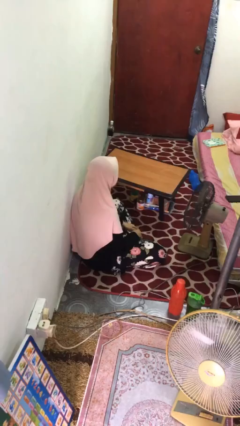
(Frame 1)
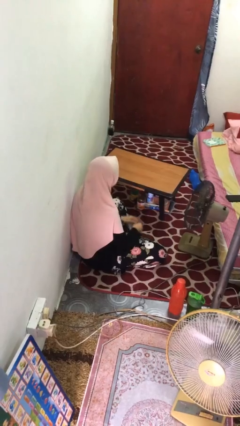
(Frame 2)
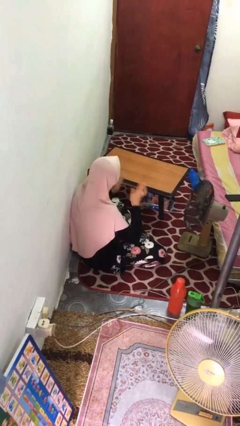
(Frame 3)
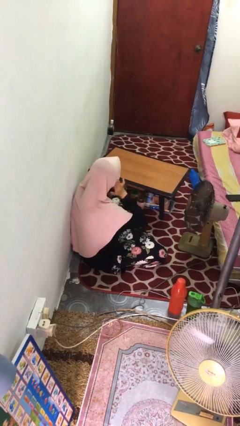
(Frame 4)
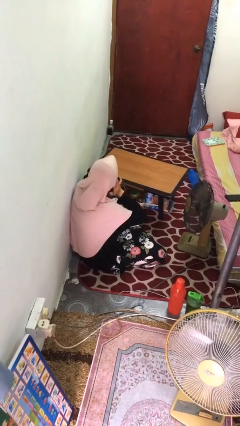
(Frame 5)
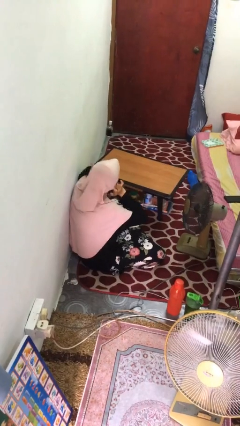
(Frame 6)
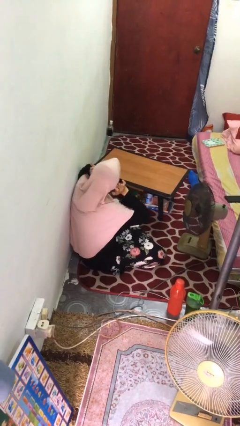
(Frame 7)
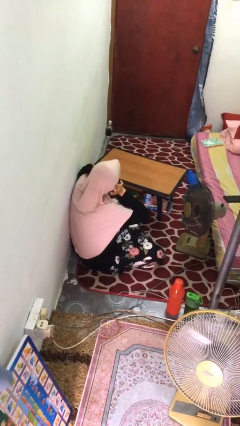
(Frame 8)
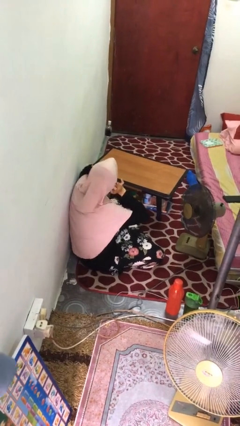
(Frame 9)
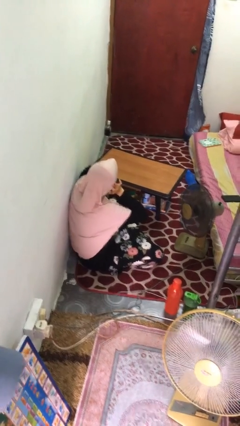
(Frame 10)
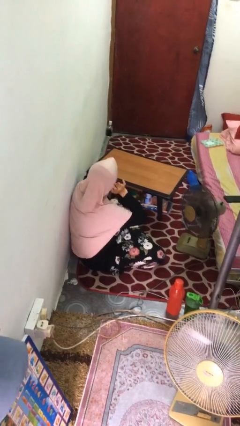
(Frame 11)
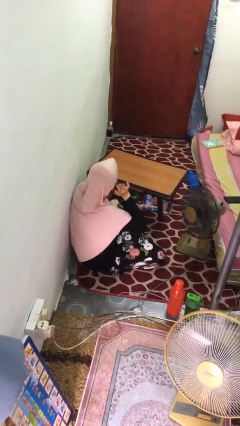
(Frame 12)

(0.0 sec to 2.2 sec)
person puts fingers in ear

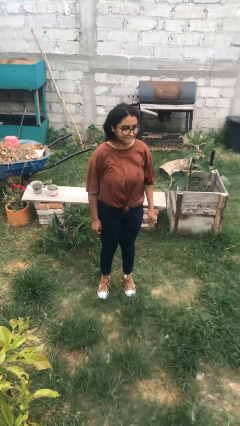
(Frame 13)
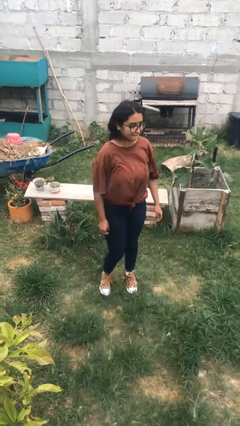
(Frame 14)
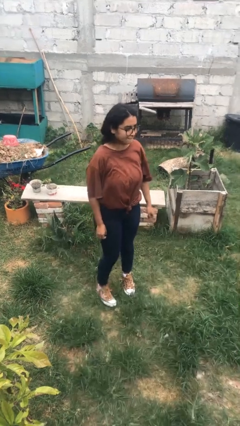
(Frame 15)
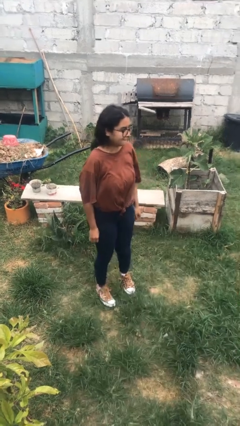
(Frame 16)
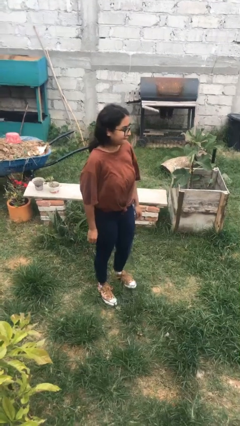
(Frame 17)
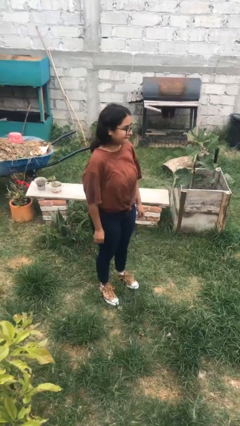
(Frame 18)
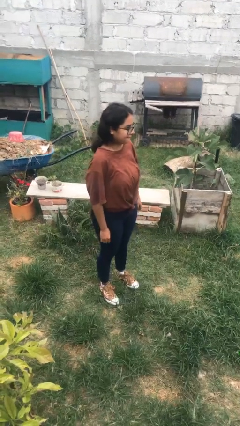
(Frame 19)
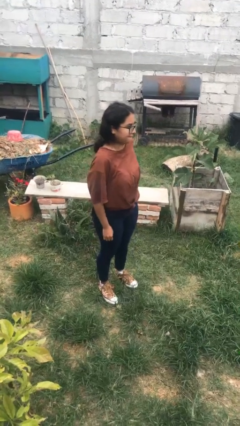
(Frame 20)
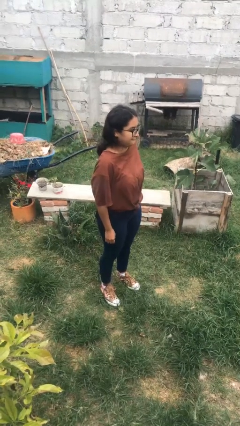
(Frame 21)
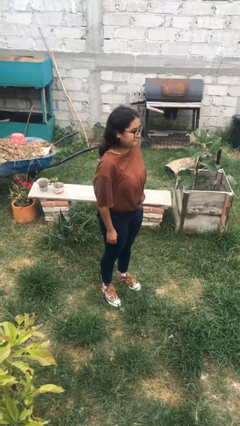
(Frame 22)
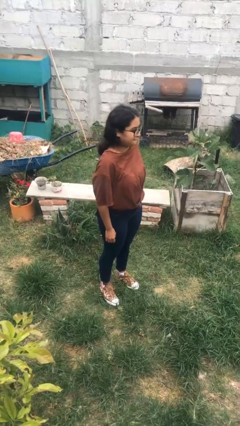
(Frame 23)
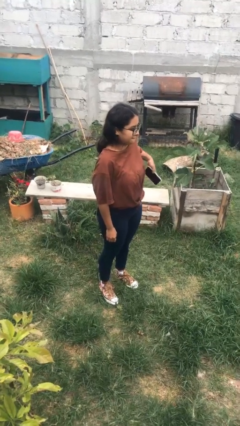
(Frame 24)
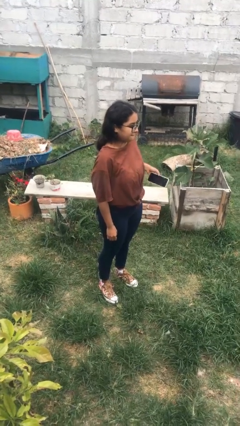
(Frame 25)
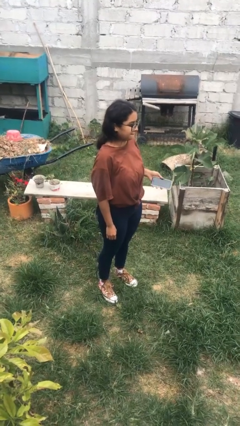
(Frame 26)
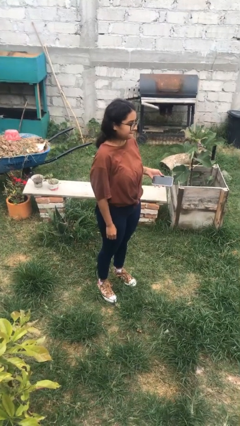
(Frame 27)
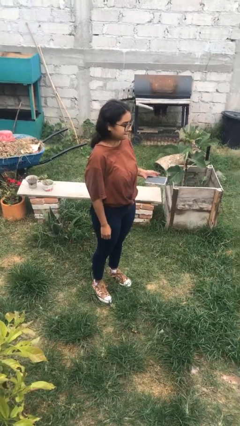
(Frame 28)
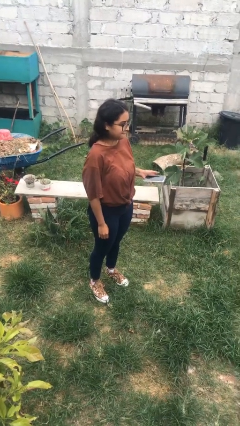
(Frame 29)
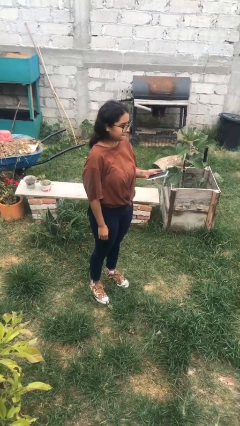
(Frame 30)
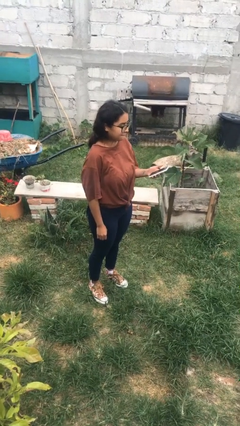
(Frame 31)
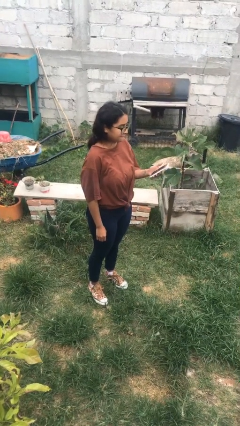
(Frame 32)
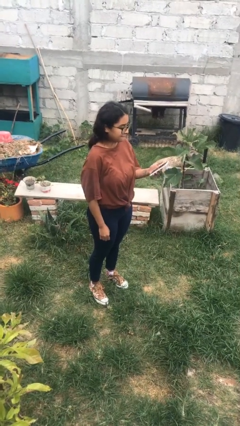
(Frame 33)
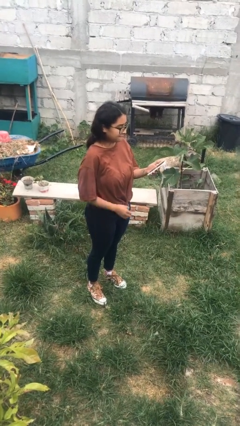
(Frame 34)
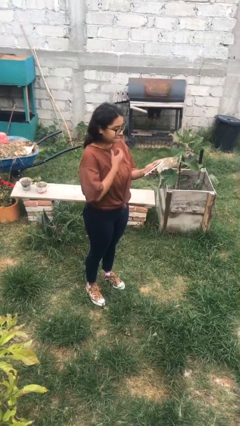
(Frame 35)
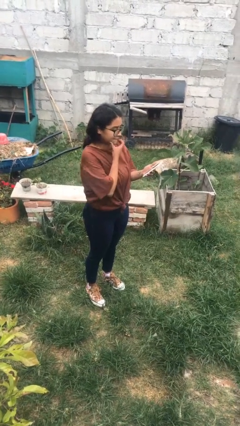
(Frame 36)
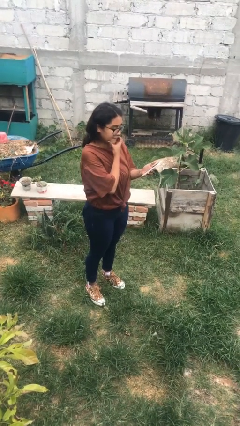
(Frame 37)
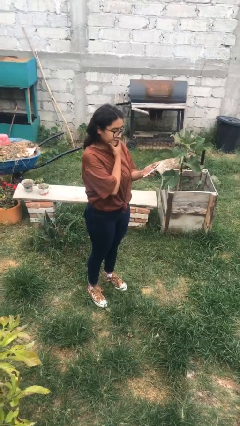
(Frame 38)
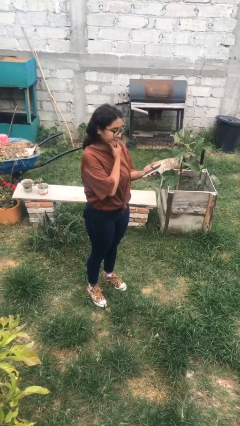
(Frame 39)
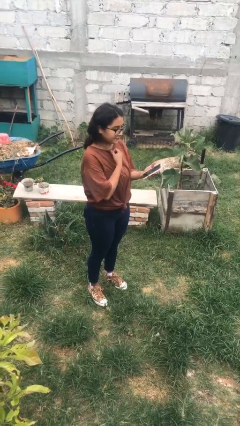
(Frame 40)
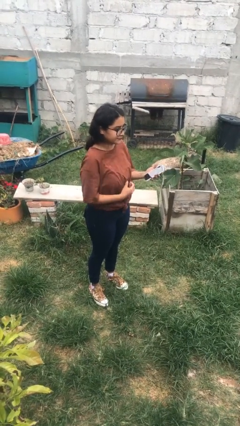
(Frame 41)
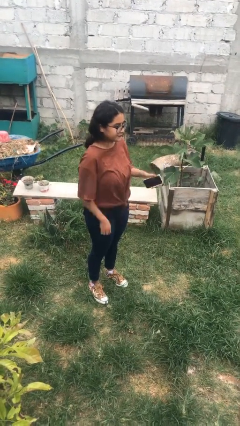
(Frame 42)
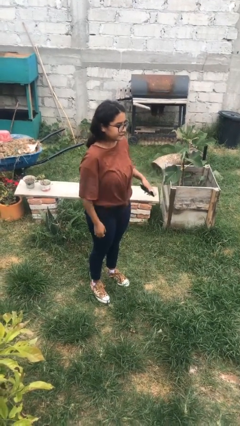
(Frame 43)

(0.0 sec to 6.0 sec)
person takes phone from pocket

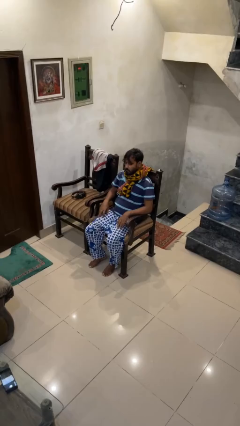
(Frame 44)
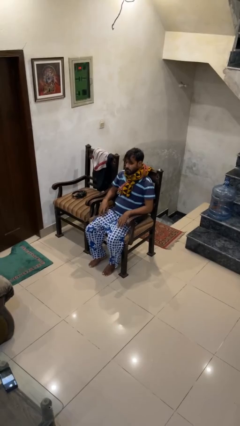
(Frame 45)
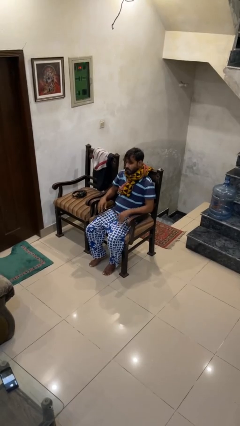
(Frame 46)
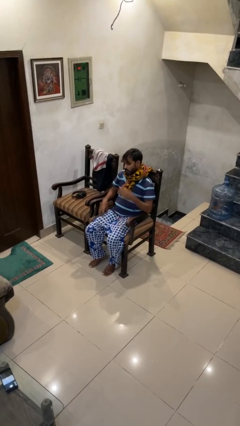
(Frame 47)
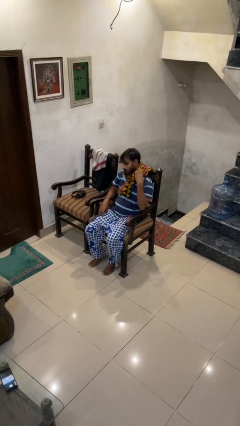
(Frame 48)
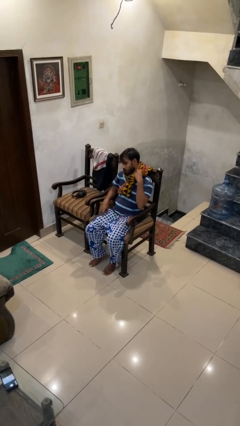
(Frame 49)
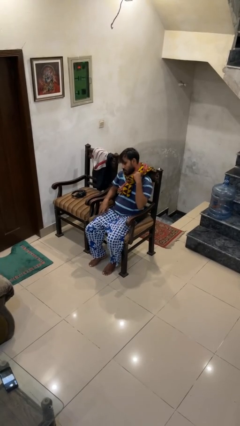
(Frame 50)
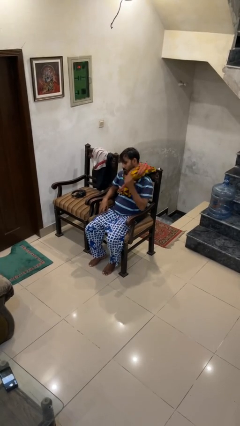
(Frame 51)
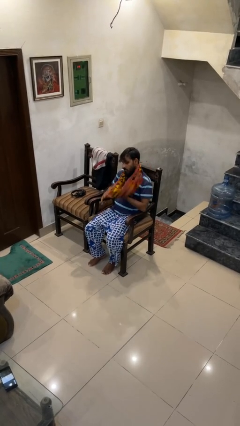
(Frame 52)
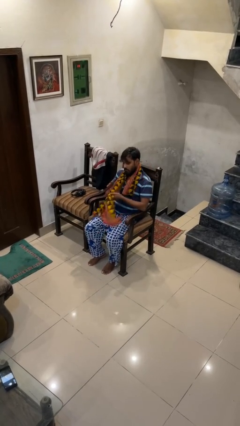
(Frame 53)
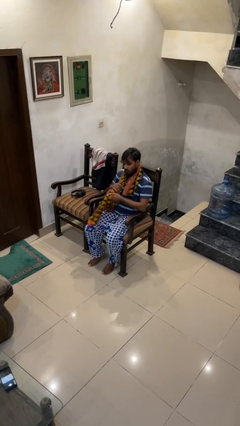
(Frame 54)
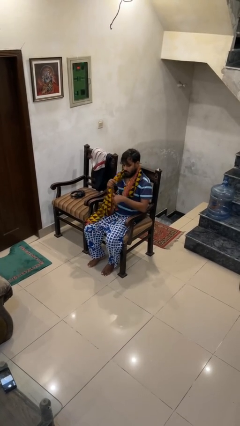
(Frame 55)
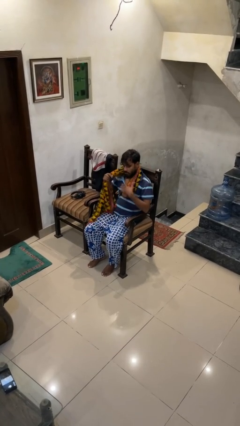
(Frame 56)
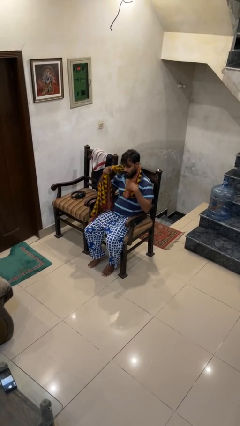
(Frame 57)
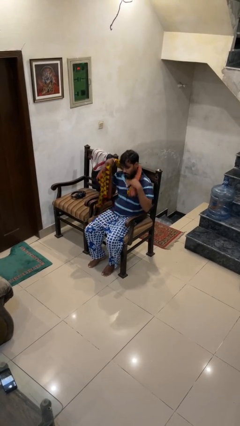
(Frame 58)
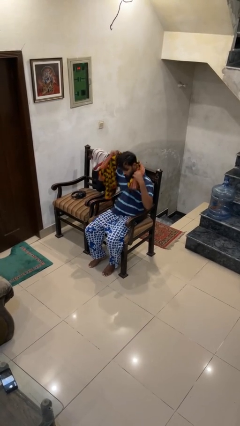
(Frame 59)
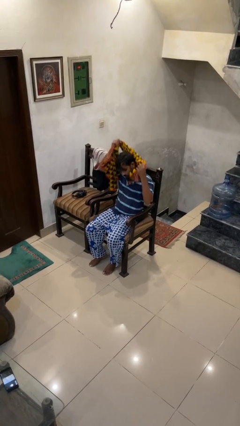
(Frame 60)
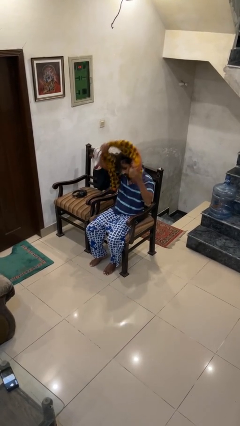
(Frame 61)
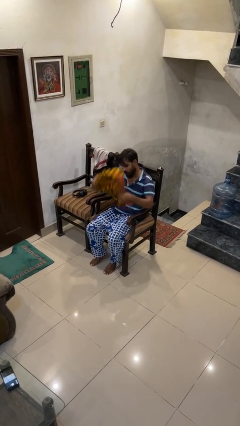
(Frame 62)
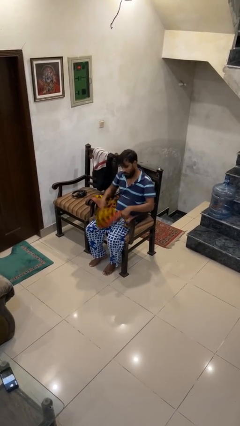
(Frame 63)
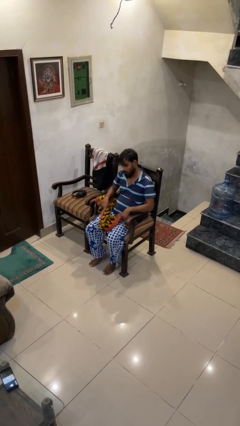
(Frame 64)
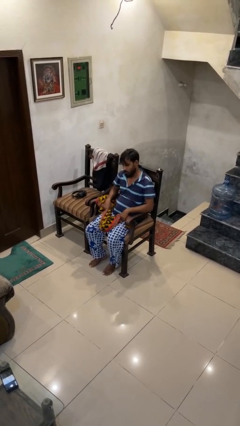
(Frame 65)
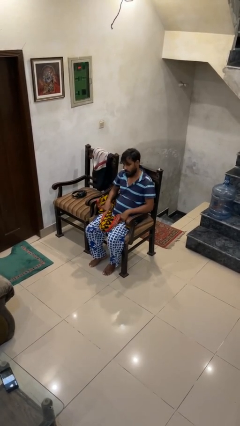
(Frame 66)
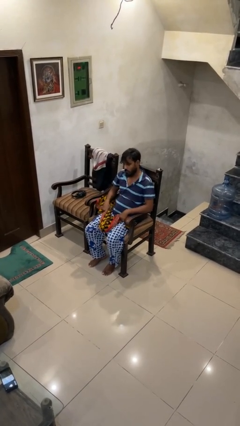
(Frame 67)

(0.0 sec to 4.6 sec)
person takes off scarf

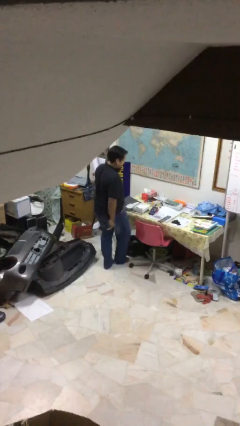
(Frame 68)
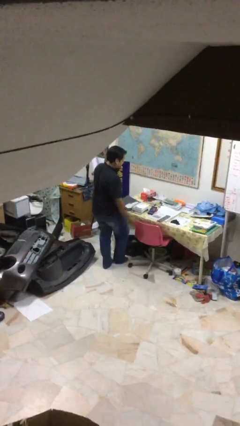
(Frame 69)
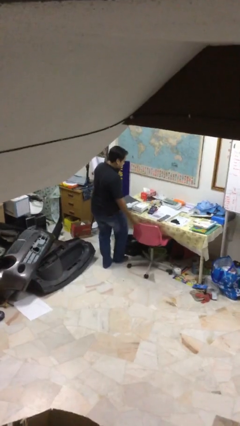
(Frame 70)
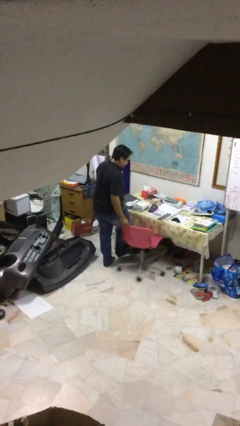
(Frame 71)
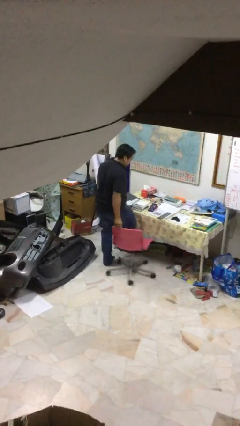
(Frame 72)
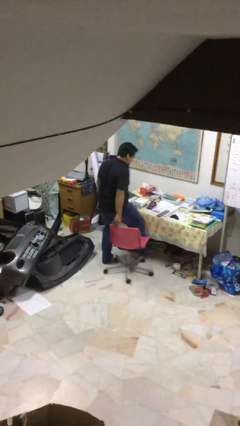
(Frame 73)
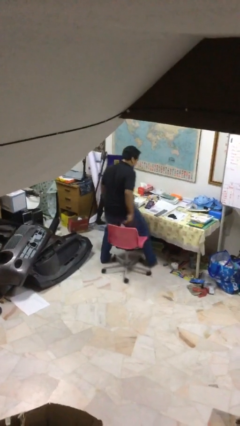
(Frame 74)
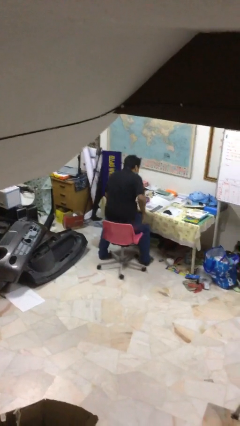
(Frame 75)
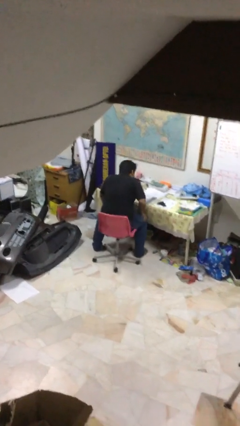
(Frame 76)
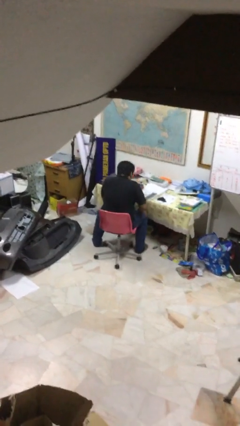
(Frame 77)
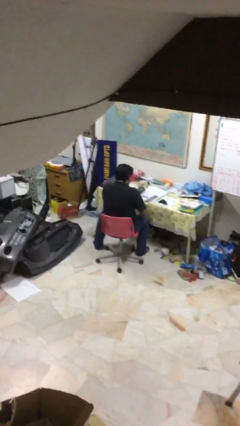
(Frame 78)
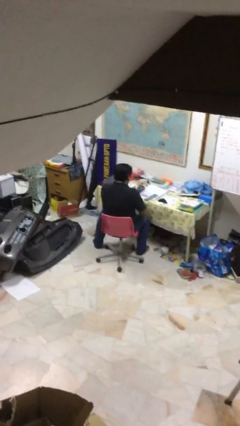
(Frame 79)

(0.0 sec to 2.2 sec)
person sits down

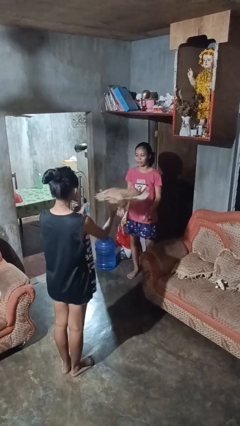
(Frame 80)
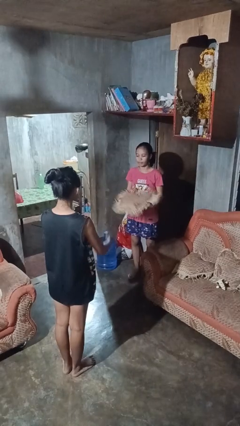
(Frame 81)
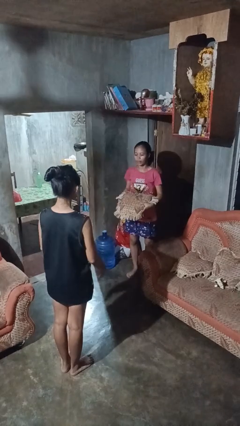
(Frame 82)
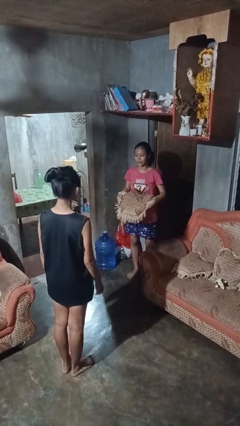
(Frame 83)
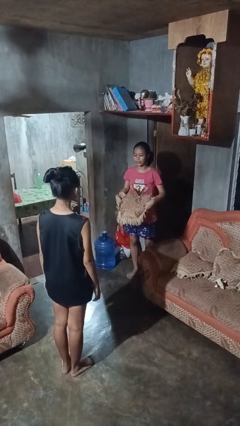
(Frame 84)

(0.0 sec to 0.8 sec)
person catches object from person

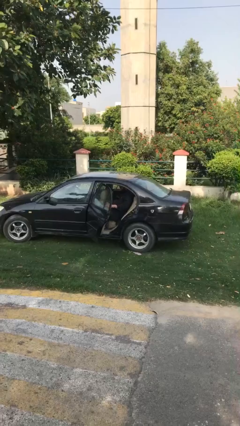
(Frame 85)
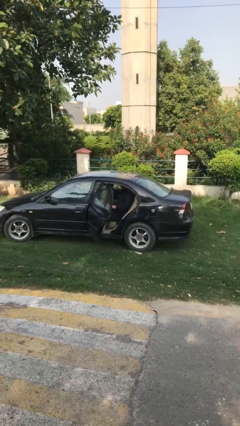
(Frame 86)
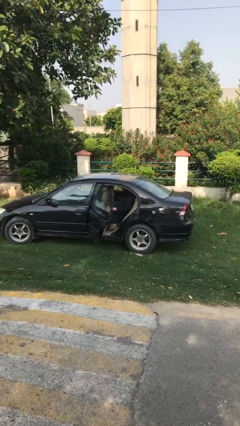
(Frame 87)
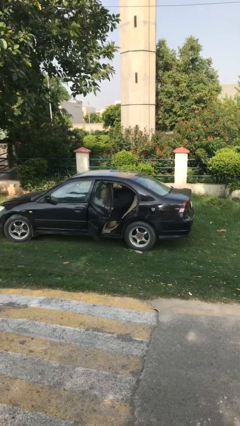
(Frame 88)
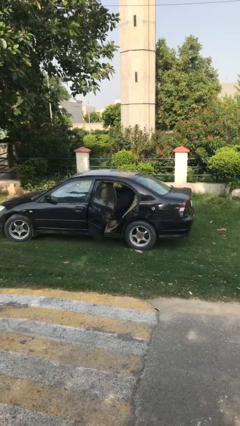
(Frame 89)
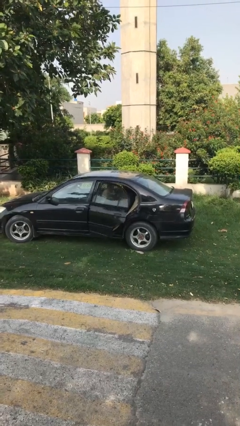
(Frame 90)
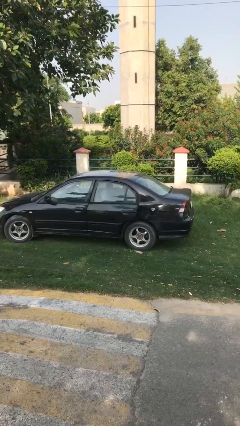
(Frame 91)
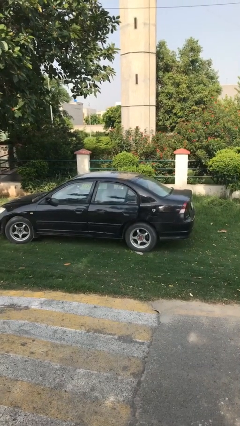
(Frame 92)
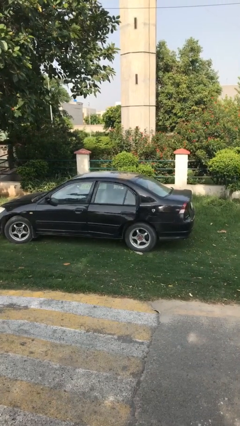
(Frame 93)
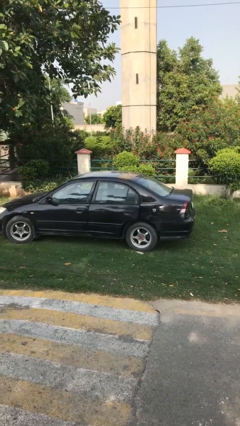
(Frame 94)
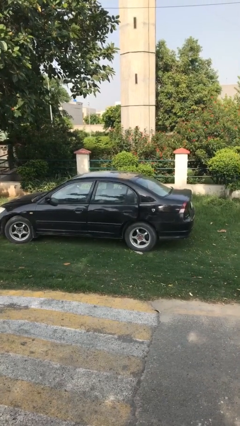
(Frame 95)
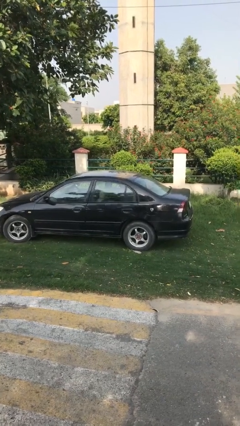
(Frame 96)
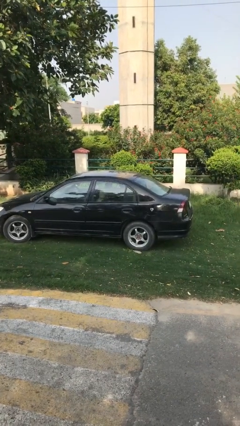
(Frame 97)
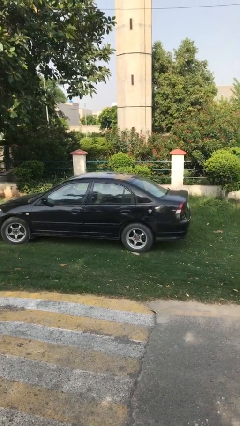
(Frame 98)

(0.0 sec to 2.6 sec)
person closes car door
